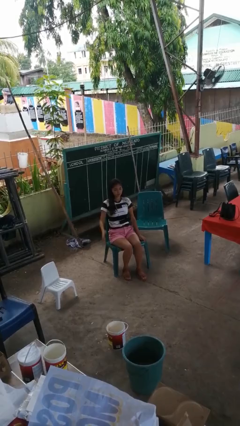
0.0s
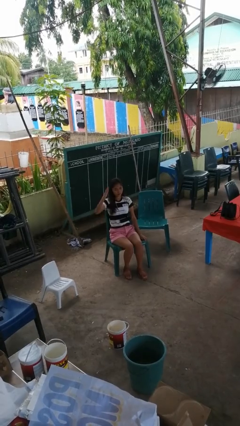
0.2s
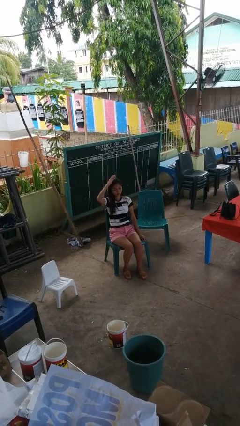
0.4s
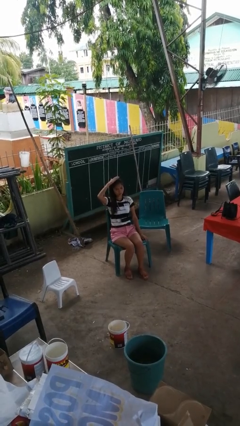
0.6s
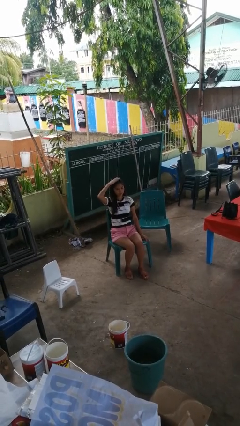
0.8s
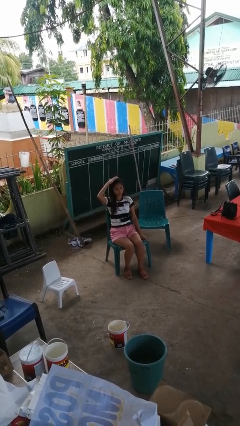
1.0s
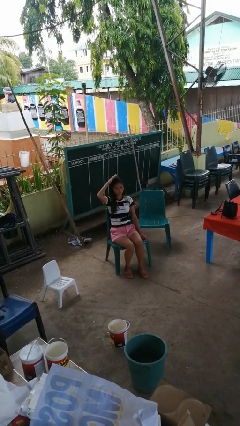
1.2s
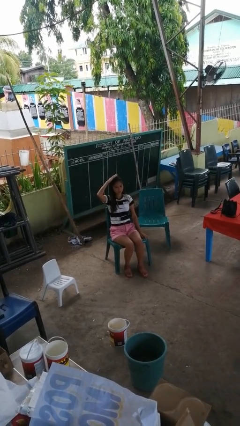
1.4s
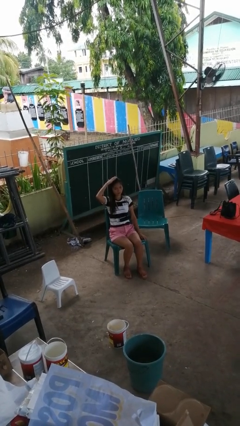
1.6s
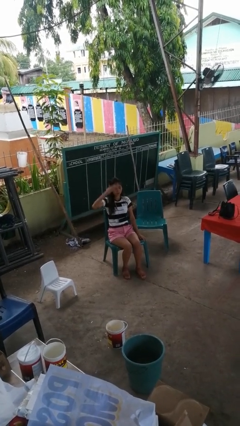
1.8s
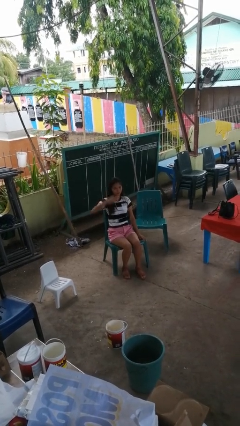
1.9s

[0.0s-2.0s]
person pats head

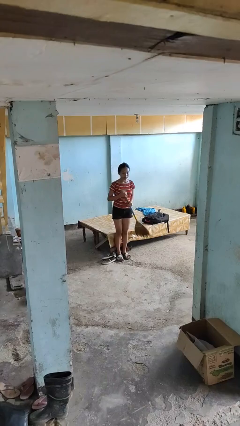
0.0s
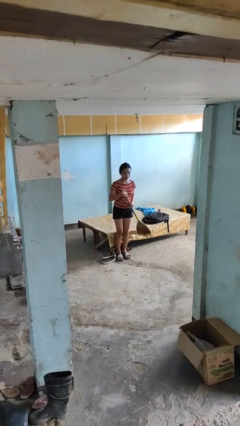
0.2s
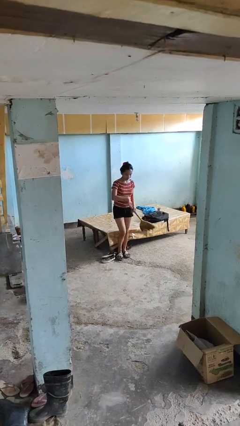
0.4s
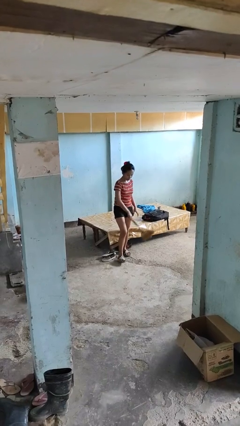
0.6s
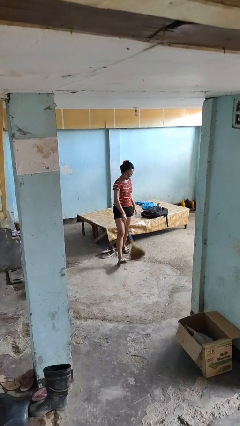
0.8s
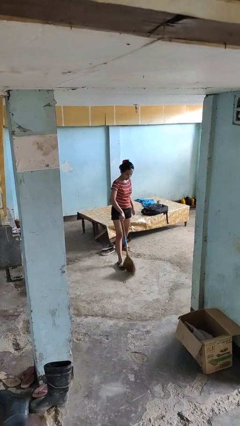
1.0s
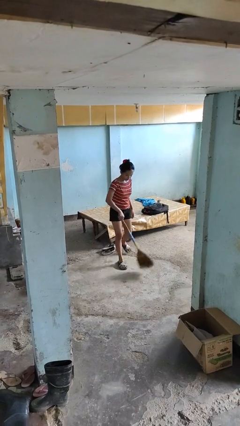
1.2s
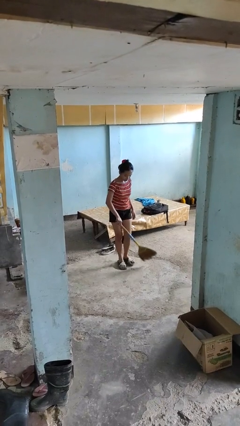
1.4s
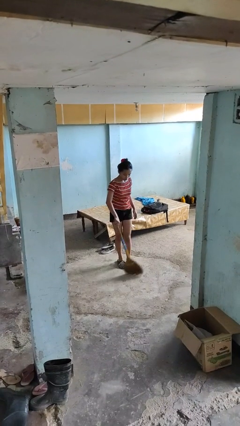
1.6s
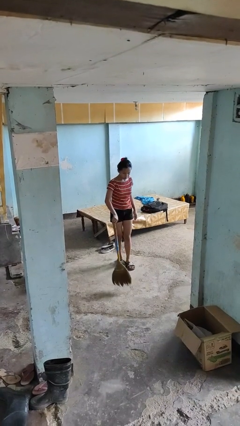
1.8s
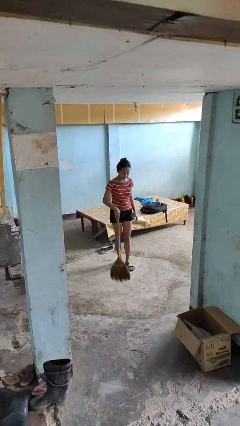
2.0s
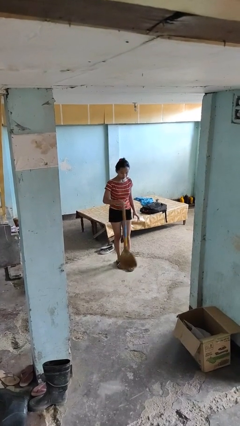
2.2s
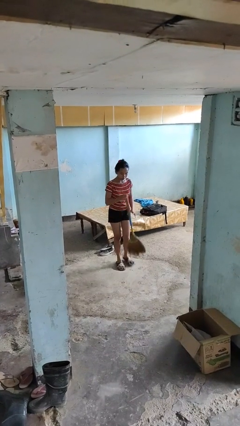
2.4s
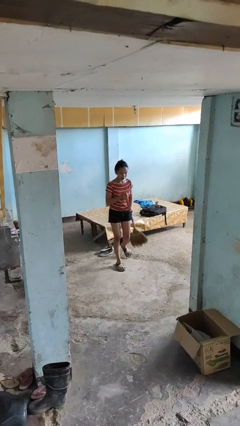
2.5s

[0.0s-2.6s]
person sweeps floor

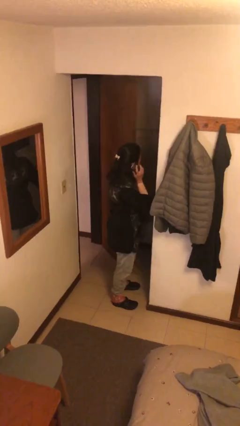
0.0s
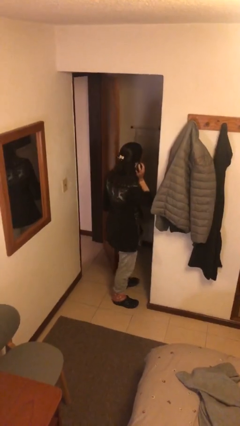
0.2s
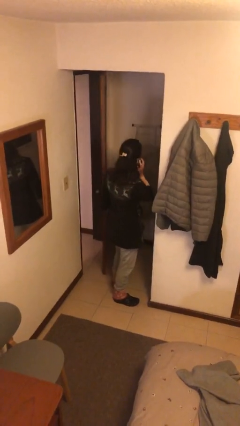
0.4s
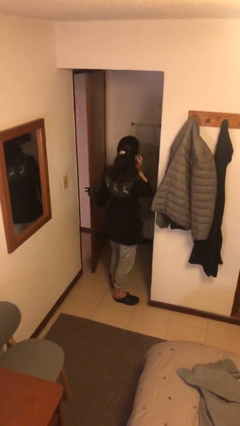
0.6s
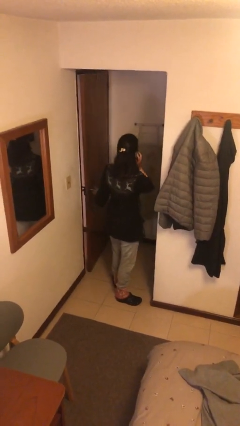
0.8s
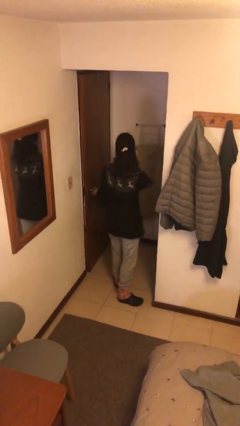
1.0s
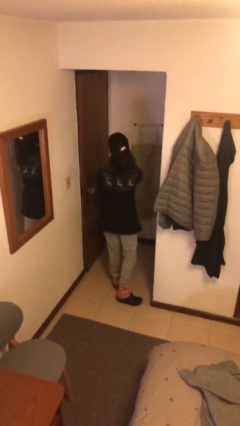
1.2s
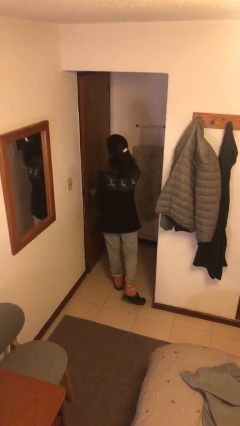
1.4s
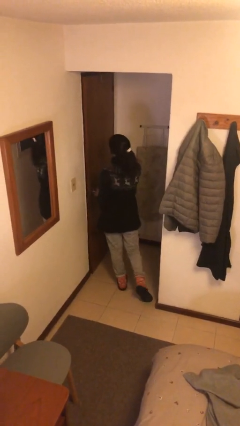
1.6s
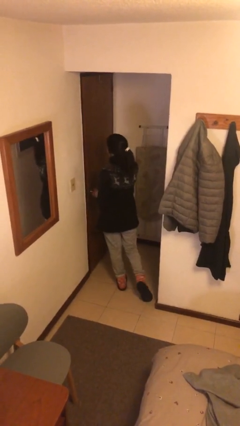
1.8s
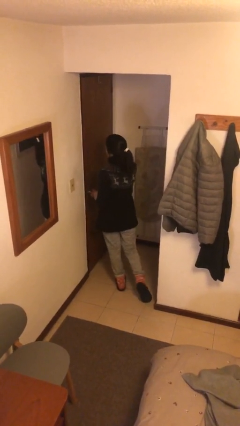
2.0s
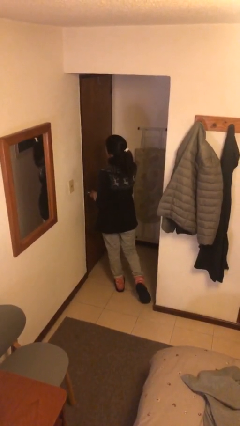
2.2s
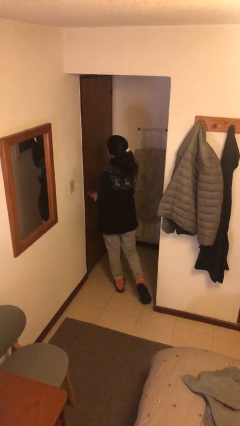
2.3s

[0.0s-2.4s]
person closes facility door

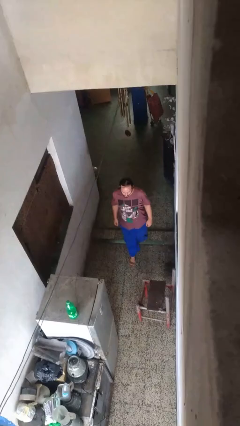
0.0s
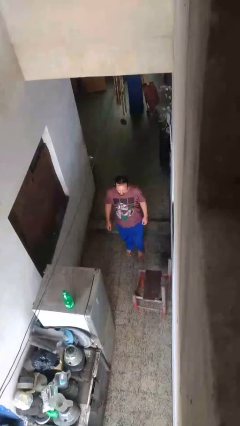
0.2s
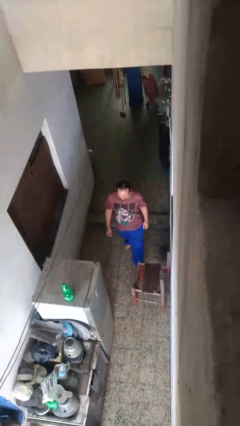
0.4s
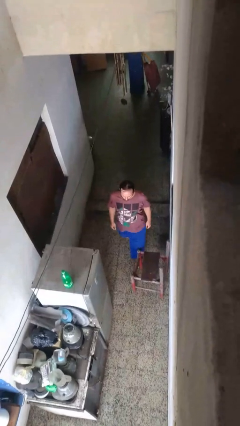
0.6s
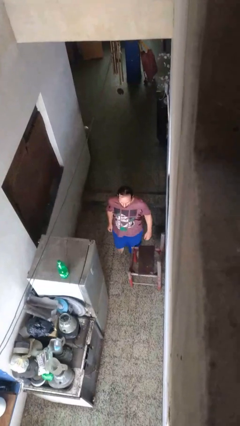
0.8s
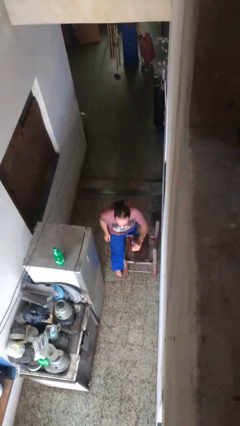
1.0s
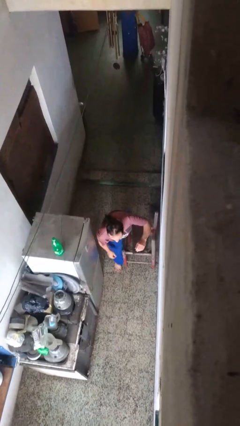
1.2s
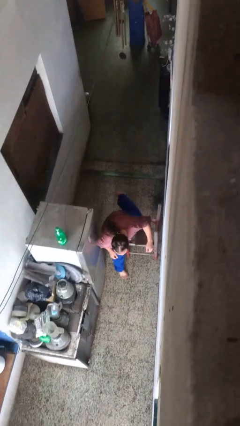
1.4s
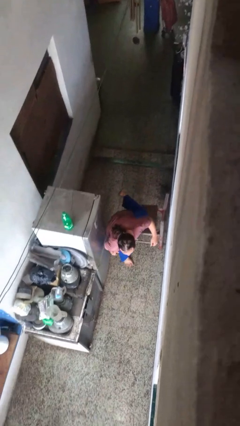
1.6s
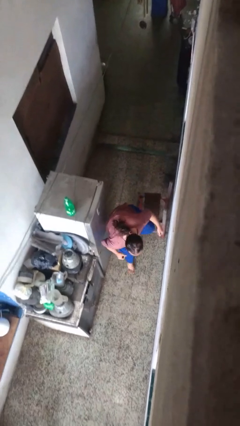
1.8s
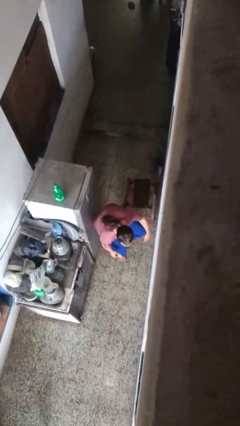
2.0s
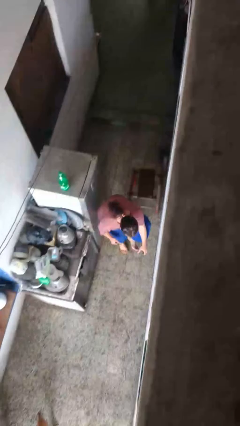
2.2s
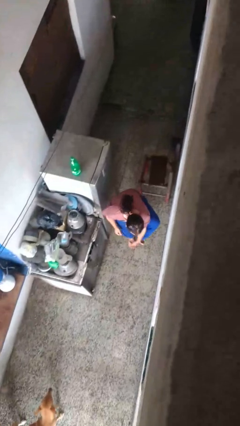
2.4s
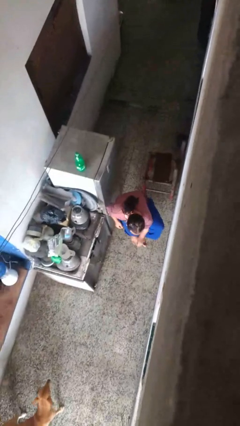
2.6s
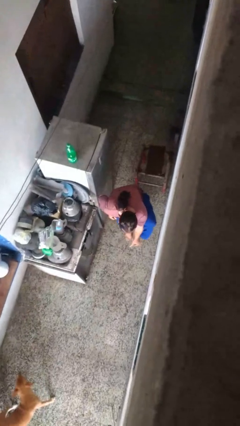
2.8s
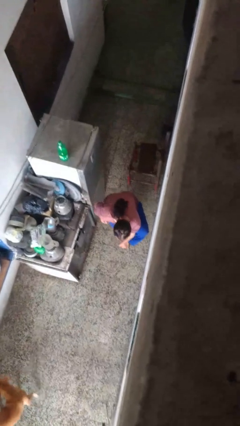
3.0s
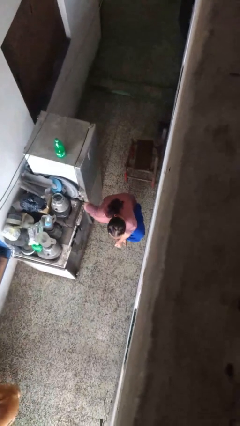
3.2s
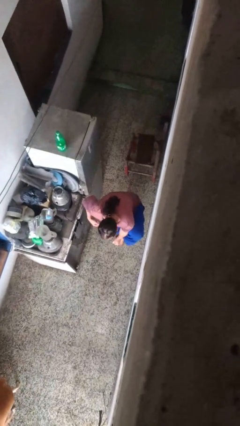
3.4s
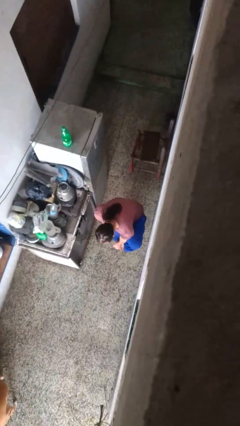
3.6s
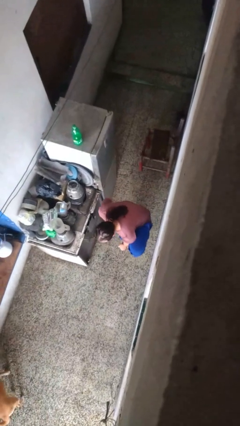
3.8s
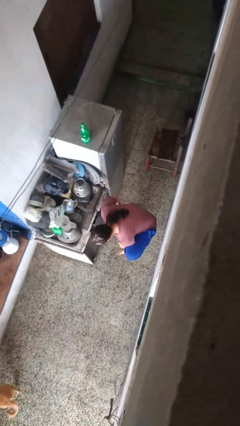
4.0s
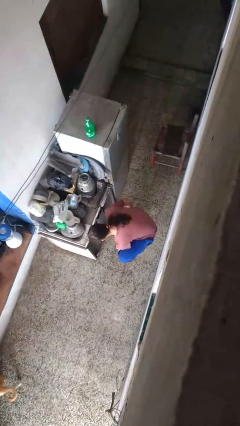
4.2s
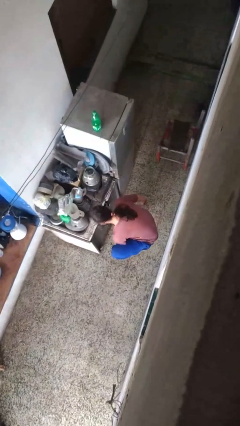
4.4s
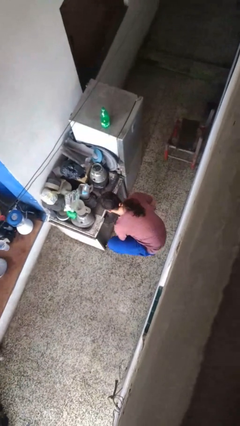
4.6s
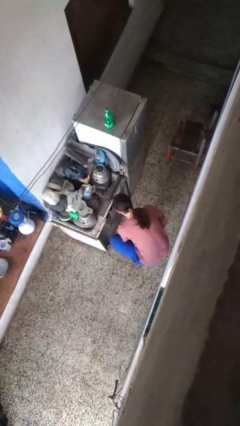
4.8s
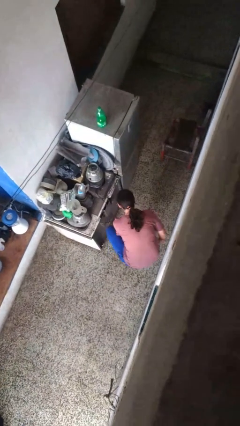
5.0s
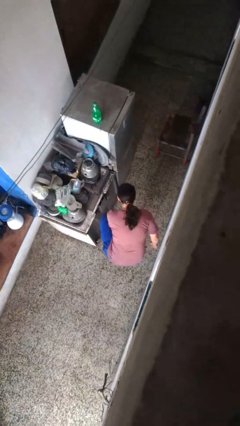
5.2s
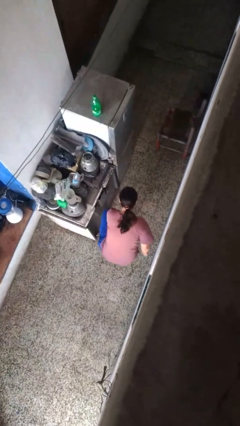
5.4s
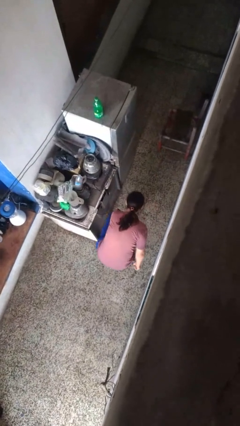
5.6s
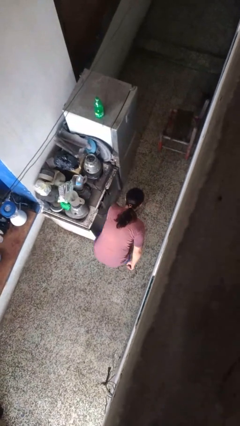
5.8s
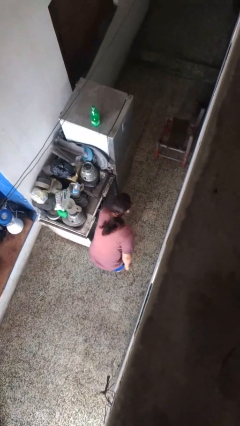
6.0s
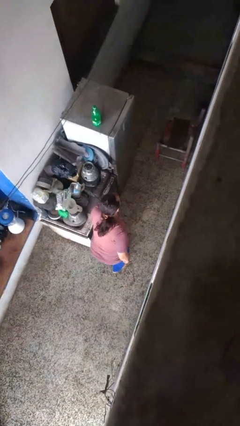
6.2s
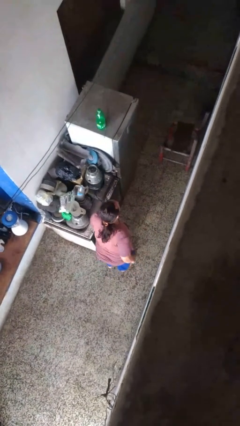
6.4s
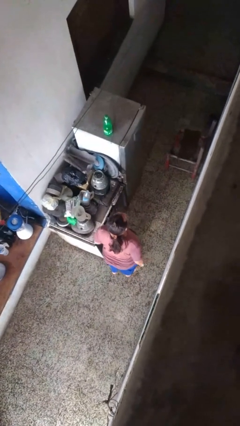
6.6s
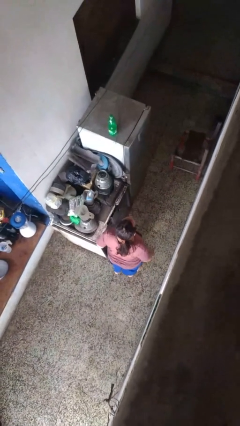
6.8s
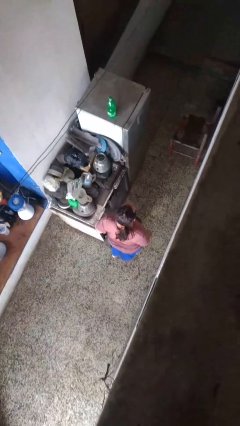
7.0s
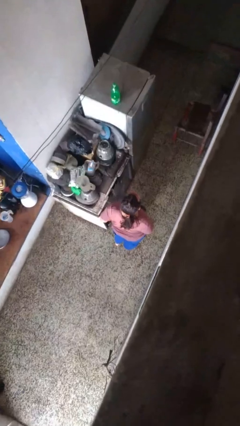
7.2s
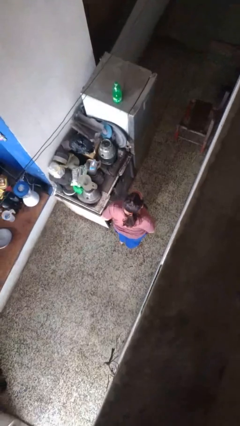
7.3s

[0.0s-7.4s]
person stubs toe

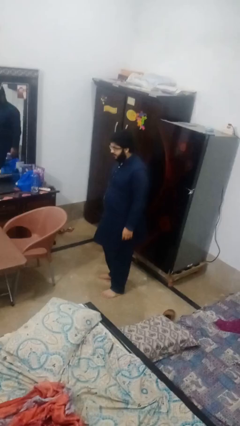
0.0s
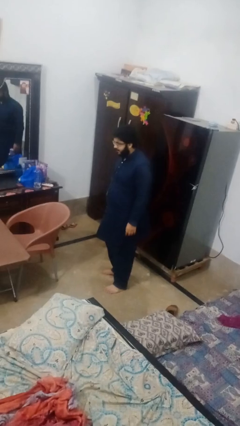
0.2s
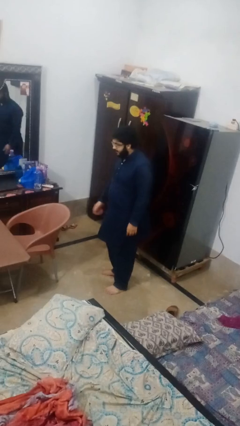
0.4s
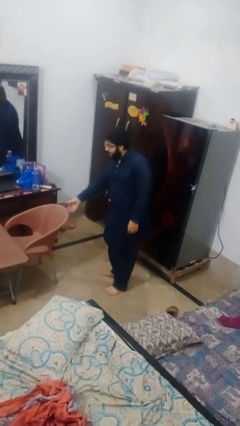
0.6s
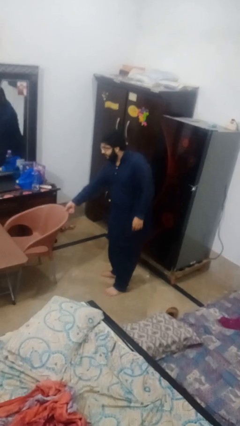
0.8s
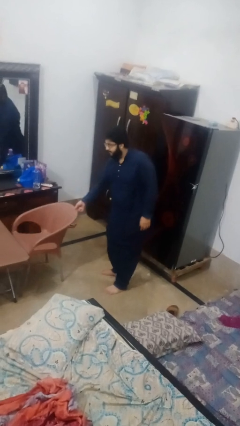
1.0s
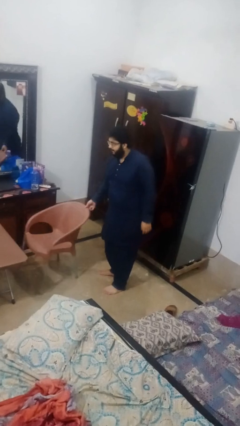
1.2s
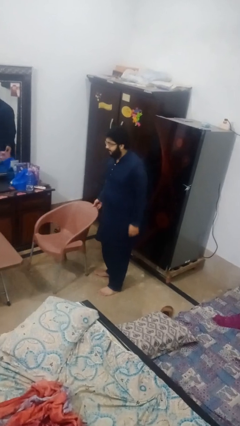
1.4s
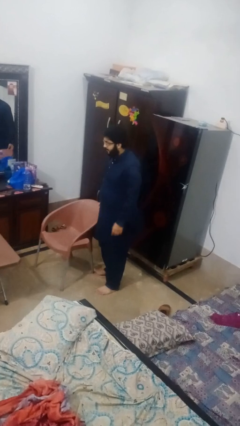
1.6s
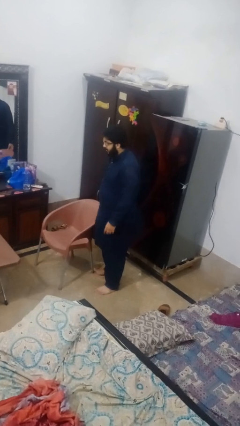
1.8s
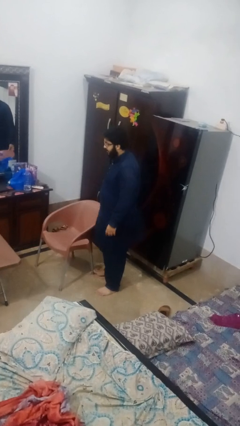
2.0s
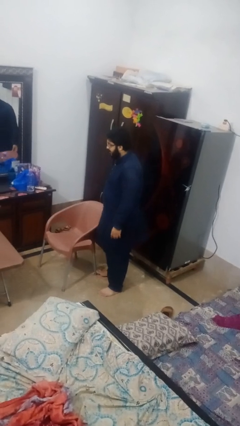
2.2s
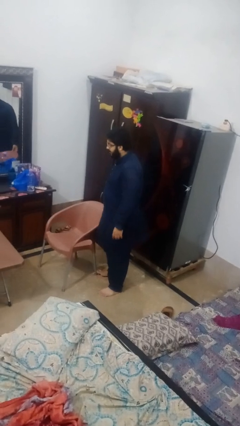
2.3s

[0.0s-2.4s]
person pulls out chair

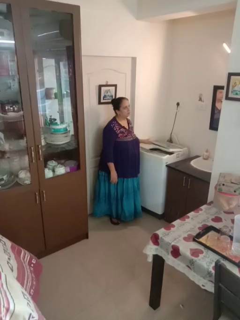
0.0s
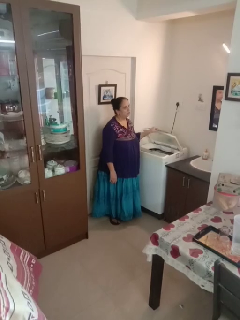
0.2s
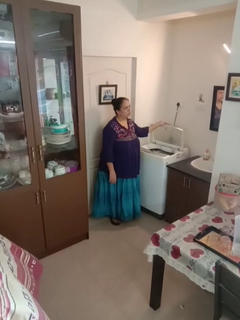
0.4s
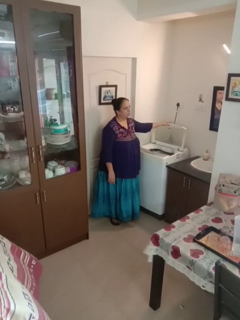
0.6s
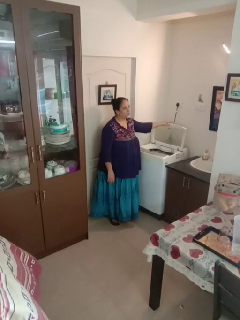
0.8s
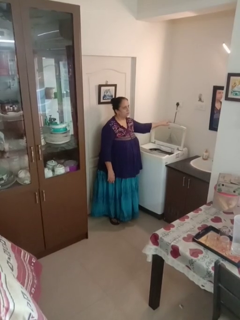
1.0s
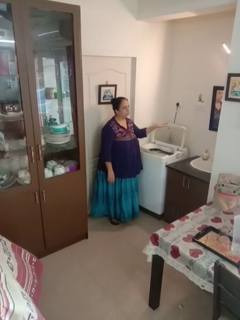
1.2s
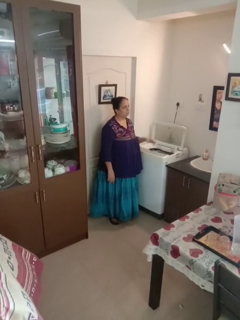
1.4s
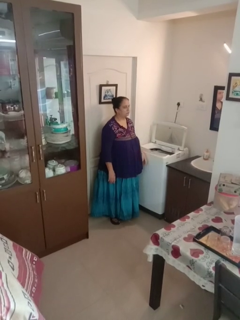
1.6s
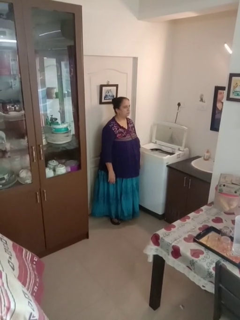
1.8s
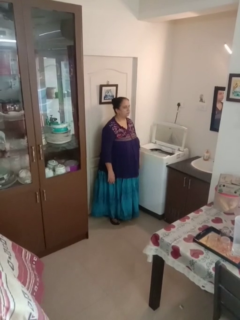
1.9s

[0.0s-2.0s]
person opens clothes washer
